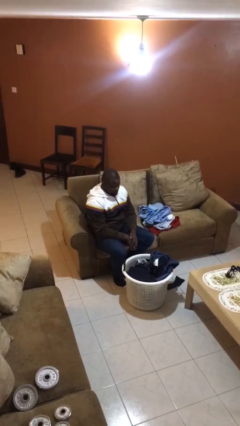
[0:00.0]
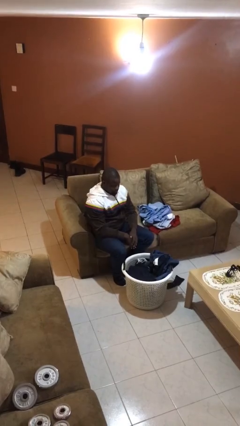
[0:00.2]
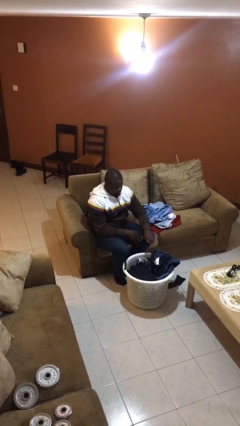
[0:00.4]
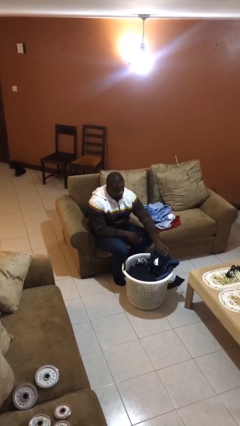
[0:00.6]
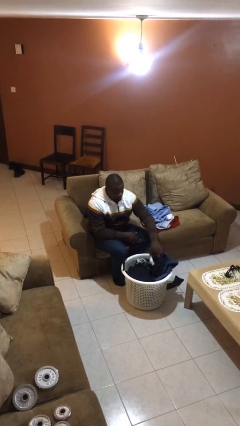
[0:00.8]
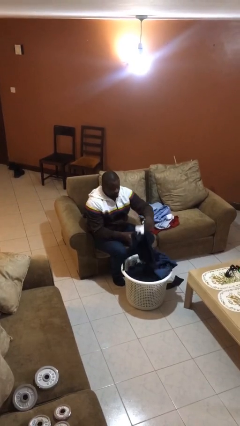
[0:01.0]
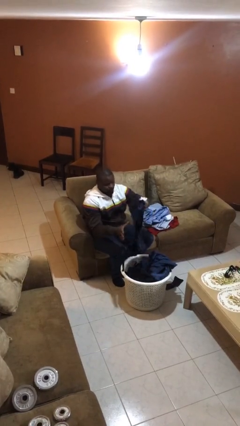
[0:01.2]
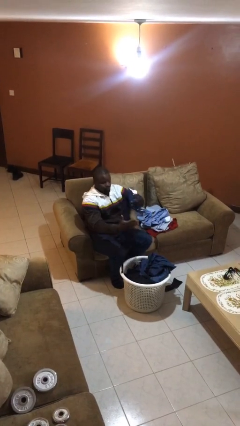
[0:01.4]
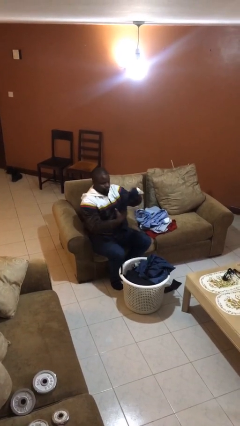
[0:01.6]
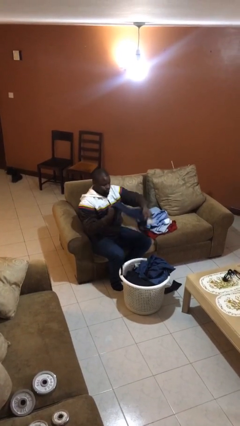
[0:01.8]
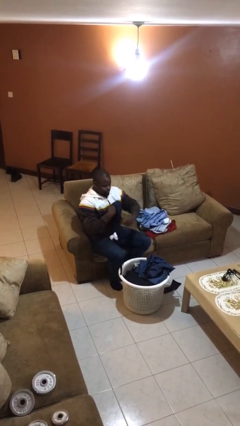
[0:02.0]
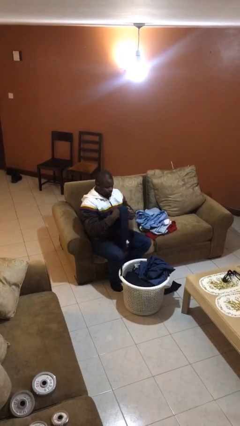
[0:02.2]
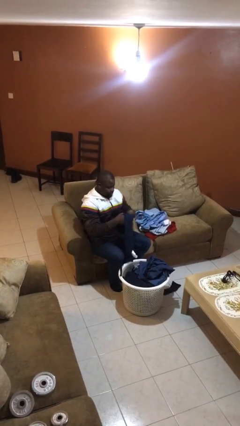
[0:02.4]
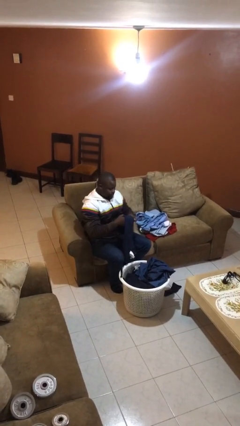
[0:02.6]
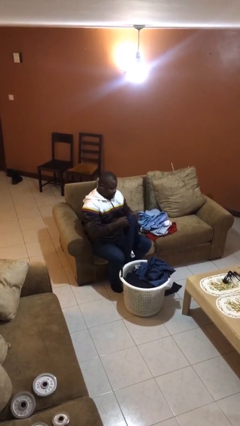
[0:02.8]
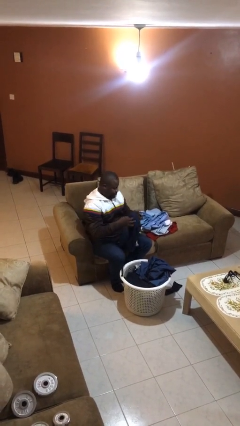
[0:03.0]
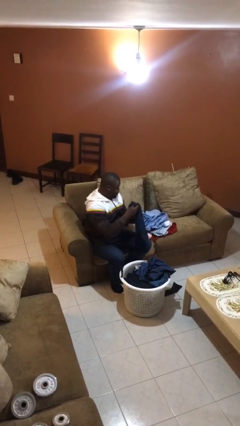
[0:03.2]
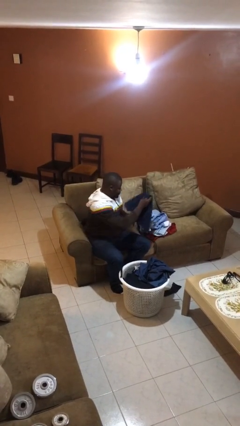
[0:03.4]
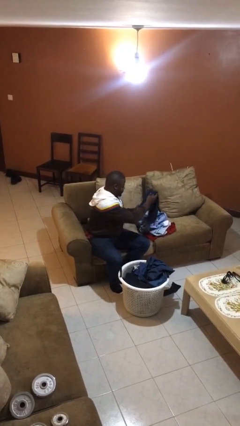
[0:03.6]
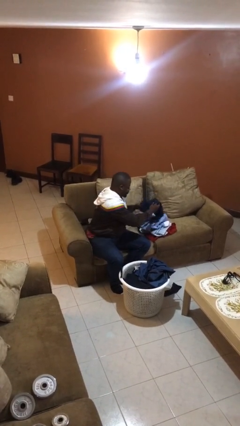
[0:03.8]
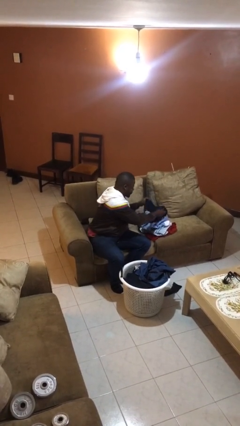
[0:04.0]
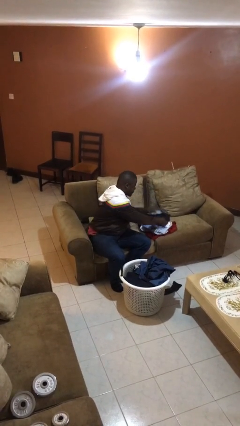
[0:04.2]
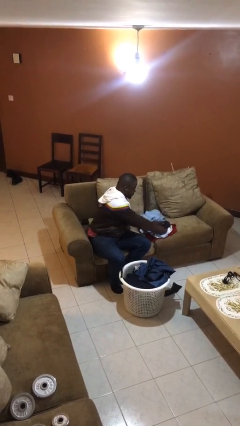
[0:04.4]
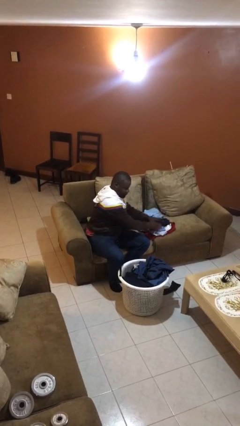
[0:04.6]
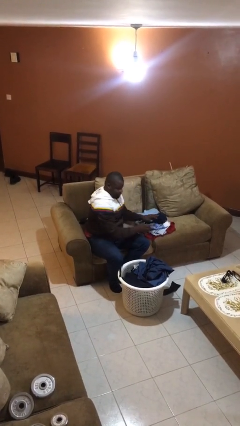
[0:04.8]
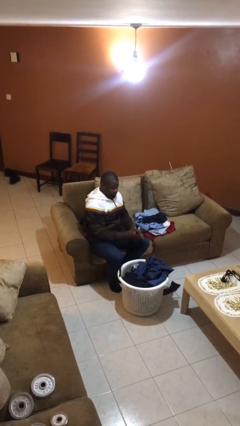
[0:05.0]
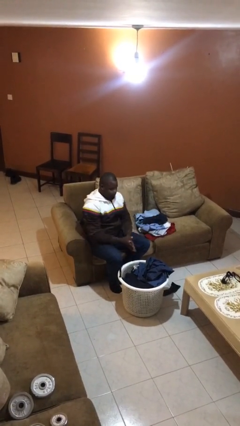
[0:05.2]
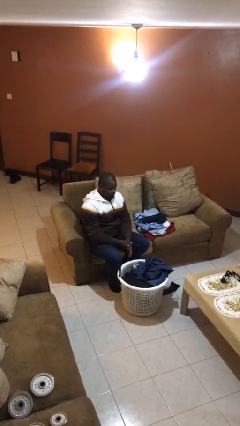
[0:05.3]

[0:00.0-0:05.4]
person folds shirt

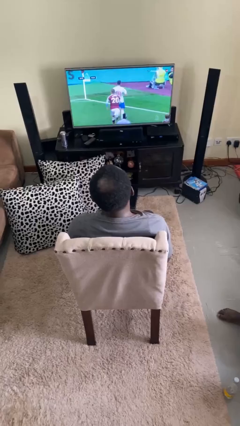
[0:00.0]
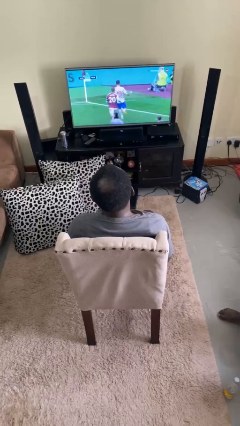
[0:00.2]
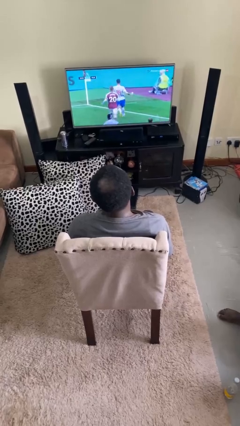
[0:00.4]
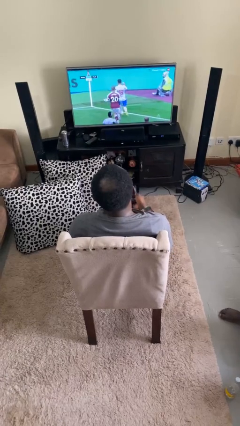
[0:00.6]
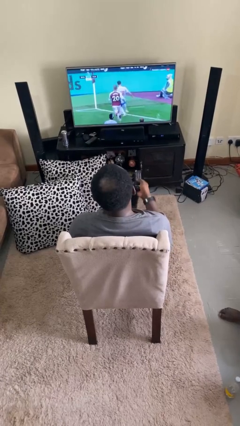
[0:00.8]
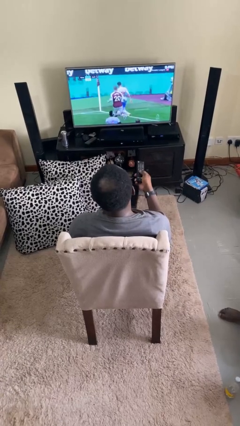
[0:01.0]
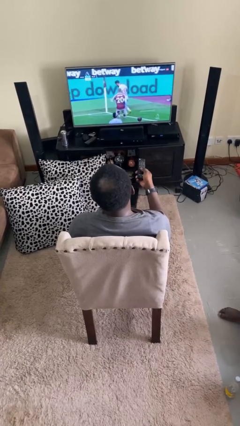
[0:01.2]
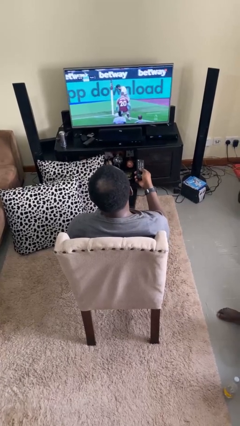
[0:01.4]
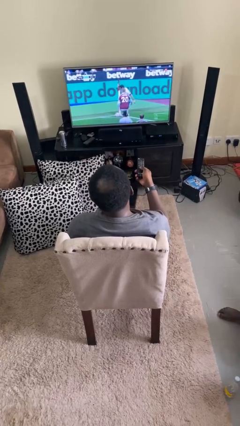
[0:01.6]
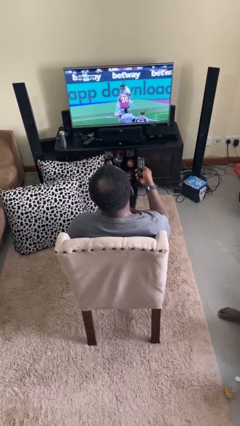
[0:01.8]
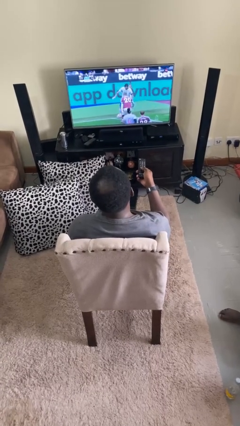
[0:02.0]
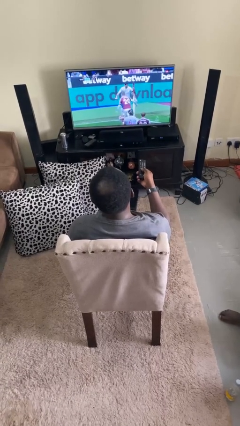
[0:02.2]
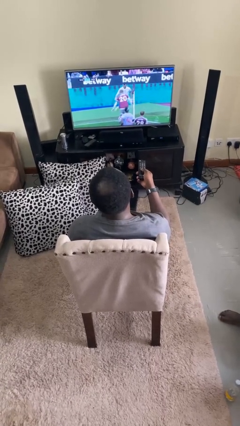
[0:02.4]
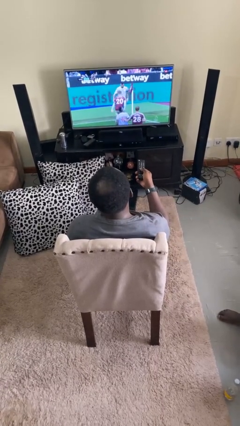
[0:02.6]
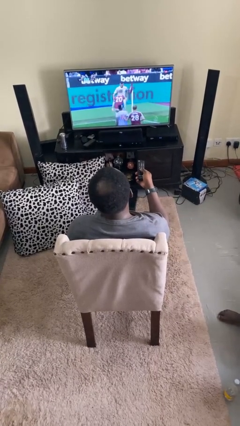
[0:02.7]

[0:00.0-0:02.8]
person uses television remote

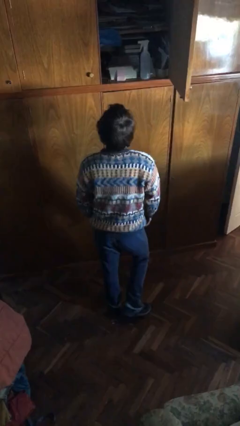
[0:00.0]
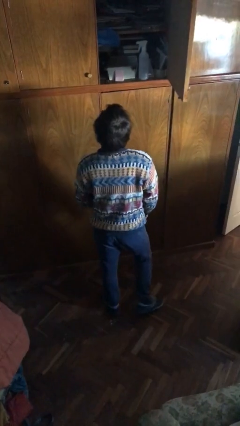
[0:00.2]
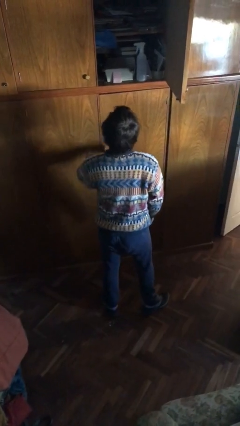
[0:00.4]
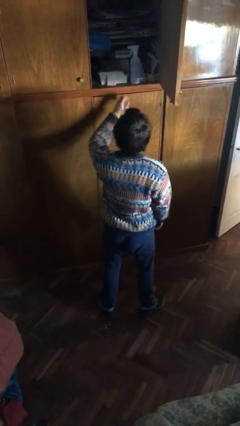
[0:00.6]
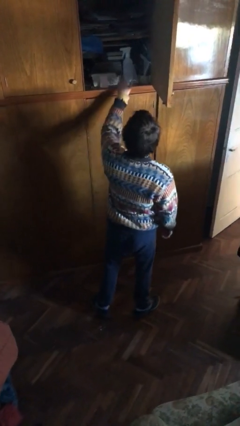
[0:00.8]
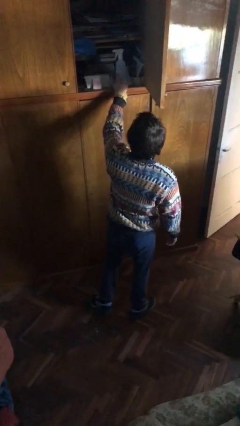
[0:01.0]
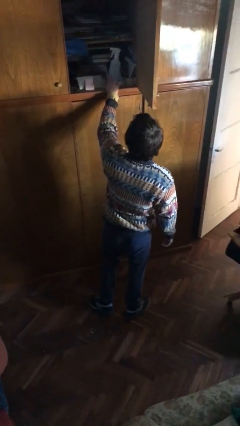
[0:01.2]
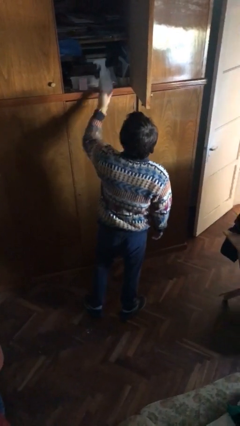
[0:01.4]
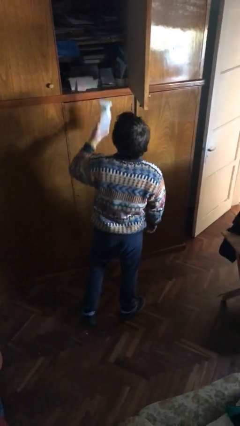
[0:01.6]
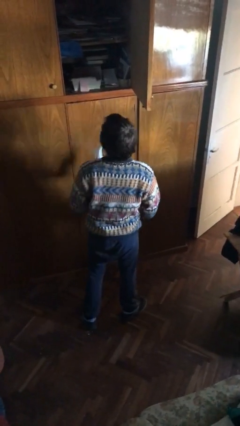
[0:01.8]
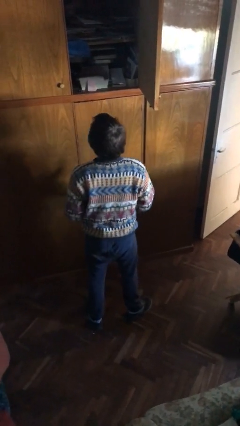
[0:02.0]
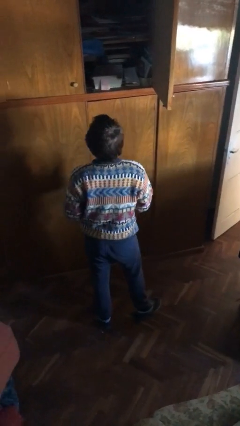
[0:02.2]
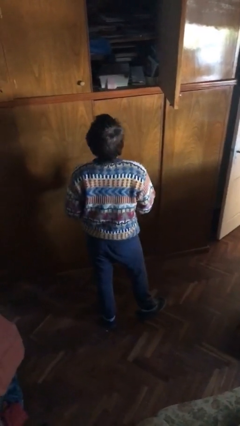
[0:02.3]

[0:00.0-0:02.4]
person picks up object from cabinet

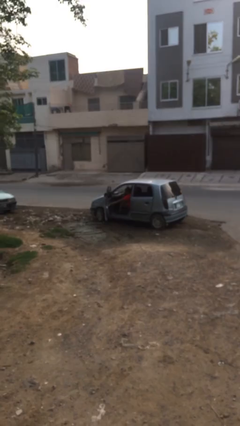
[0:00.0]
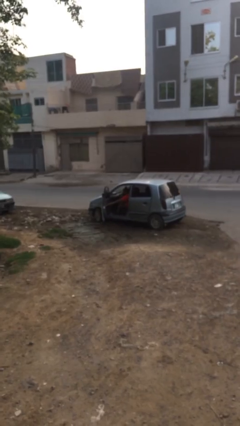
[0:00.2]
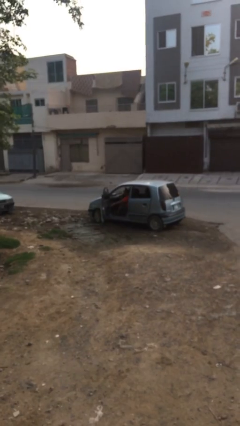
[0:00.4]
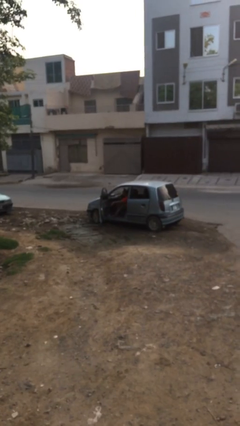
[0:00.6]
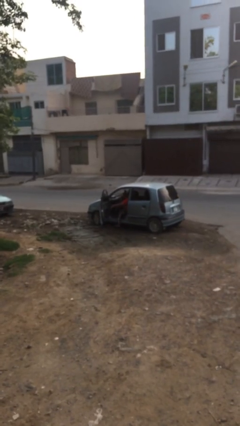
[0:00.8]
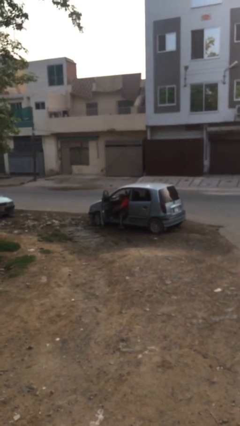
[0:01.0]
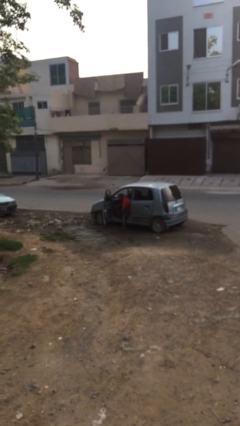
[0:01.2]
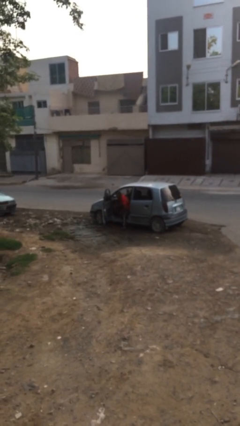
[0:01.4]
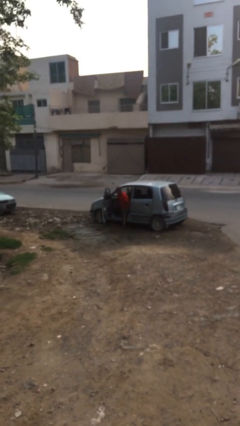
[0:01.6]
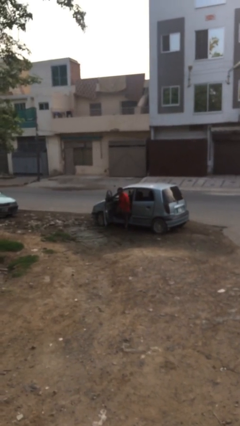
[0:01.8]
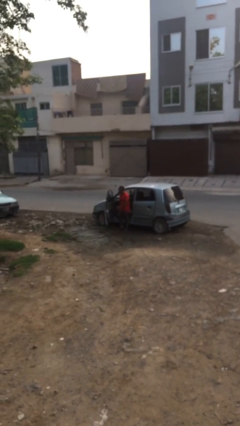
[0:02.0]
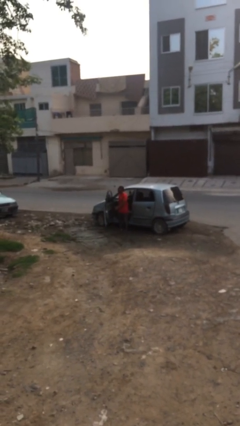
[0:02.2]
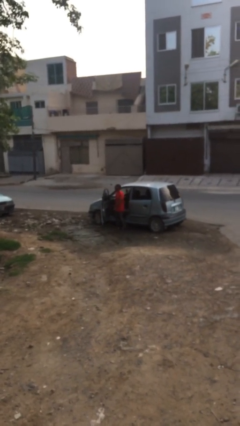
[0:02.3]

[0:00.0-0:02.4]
person exits car

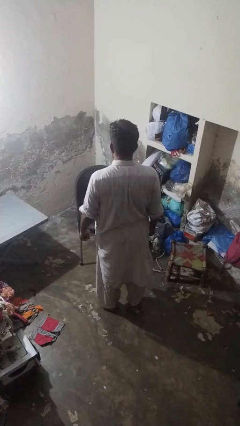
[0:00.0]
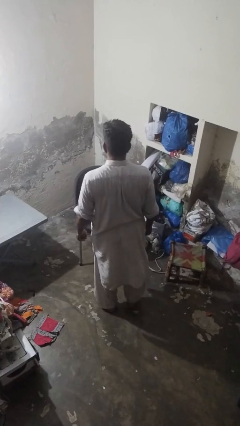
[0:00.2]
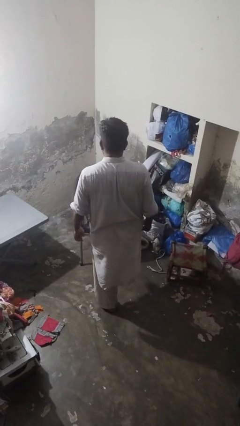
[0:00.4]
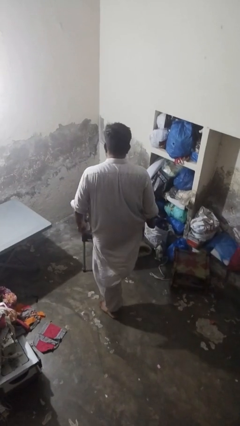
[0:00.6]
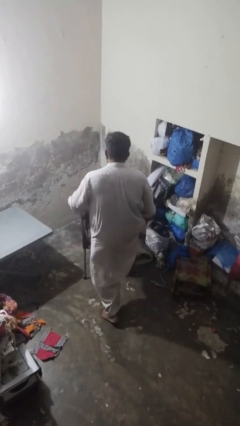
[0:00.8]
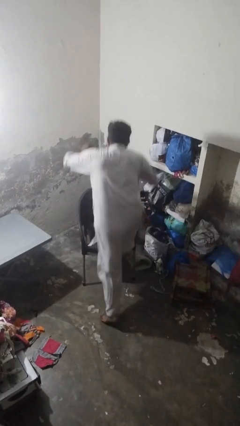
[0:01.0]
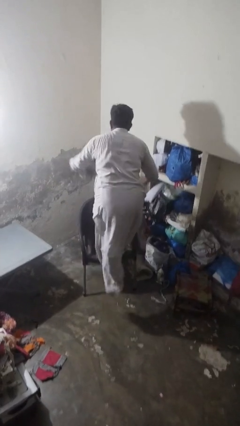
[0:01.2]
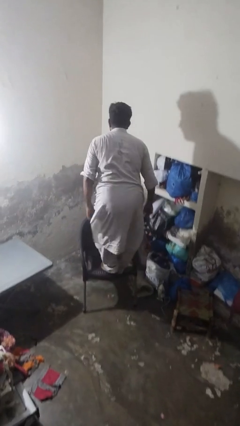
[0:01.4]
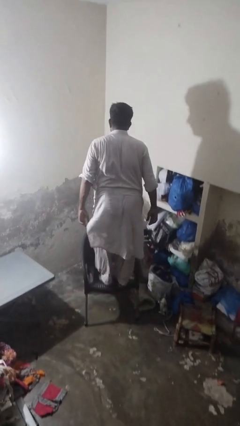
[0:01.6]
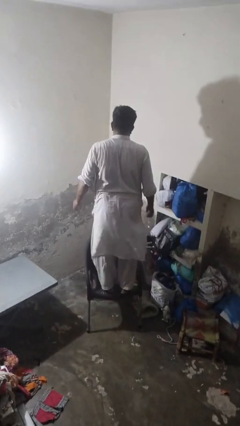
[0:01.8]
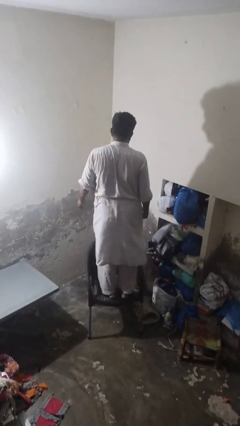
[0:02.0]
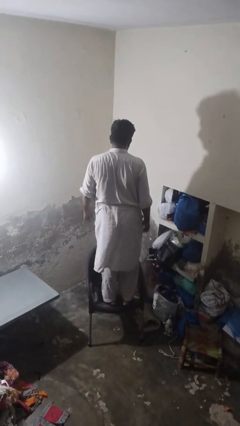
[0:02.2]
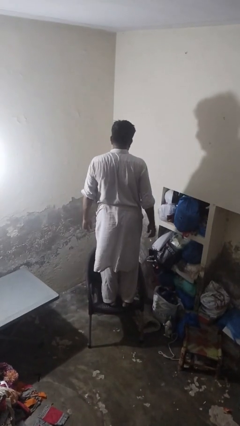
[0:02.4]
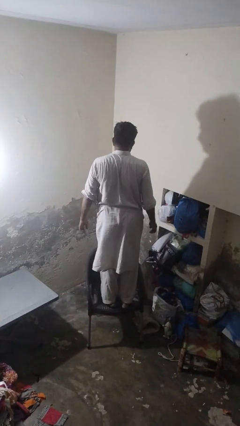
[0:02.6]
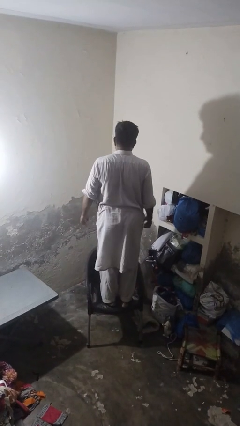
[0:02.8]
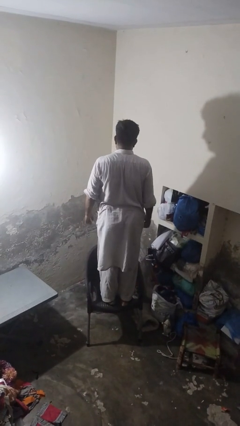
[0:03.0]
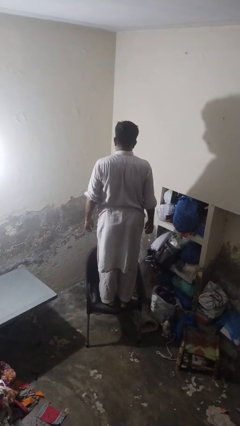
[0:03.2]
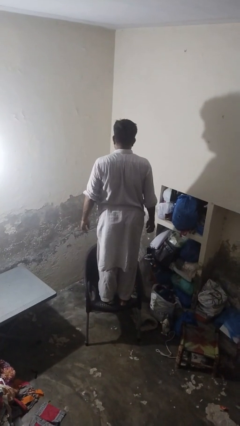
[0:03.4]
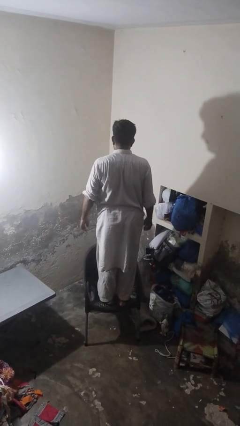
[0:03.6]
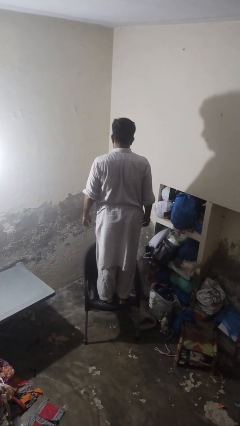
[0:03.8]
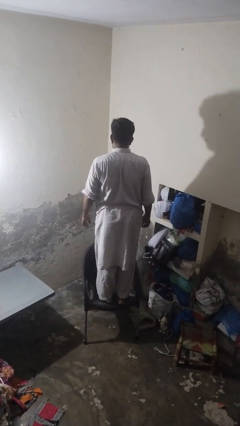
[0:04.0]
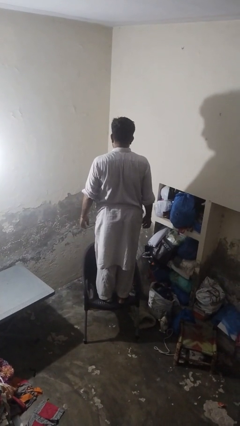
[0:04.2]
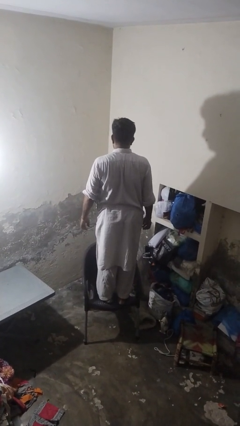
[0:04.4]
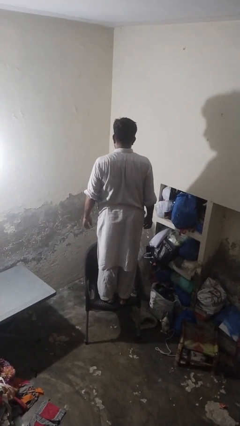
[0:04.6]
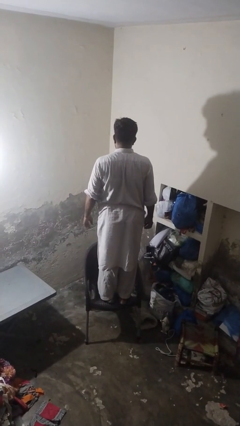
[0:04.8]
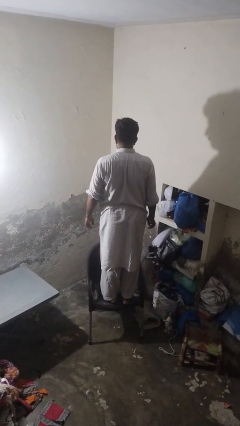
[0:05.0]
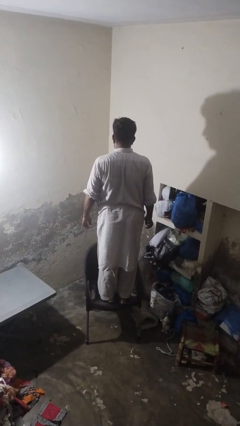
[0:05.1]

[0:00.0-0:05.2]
person climbs on chair
